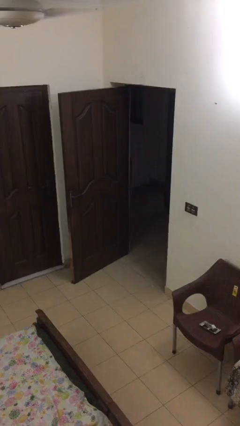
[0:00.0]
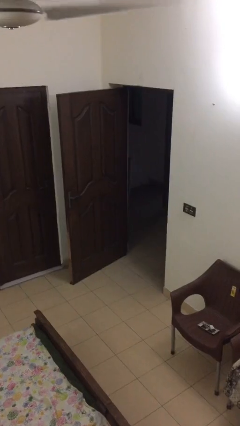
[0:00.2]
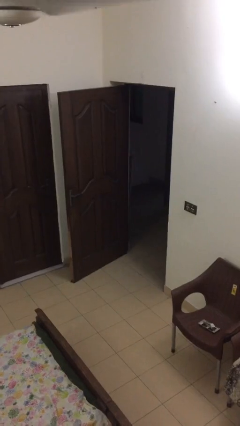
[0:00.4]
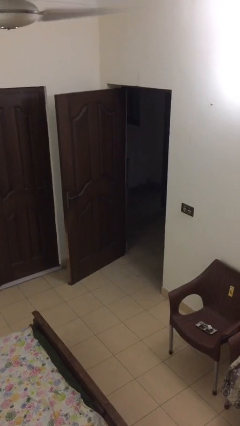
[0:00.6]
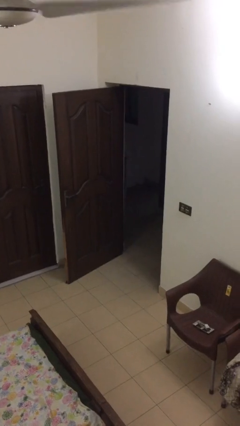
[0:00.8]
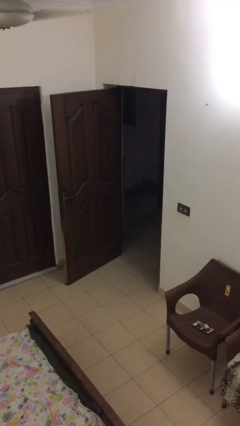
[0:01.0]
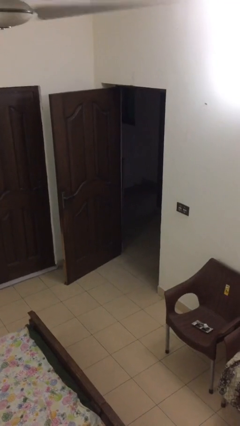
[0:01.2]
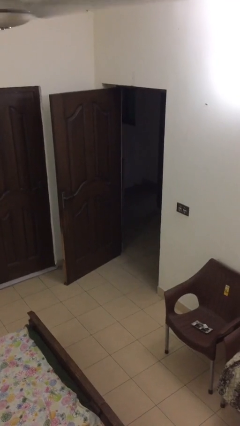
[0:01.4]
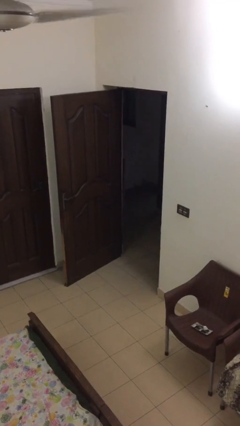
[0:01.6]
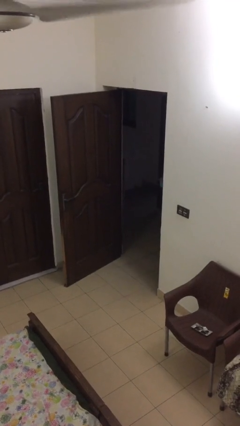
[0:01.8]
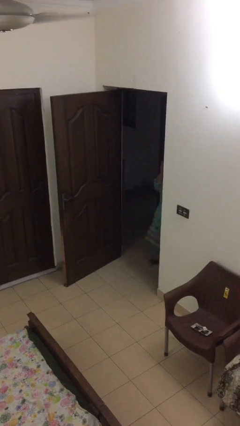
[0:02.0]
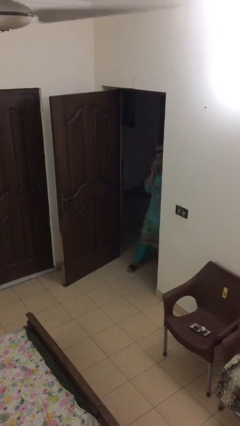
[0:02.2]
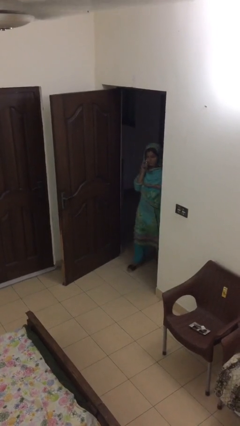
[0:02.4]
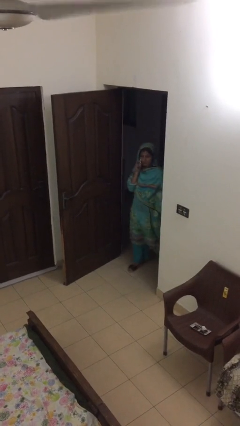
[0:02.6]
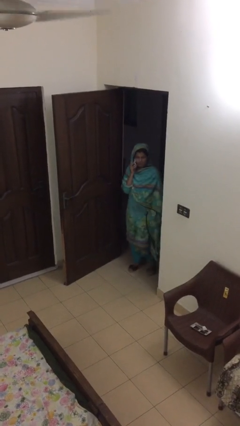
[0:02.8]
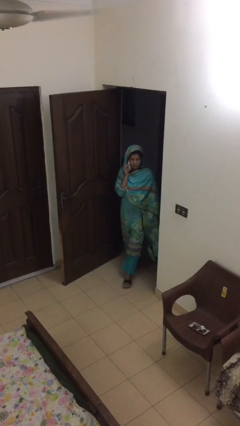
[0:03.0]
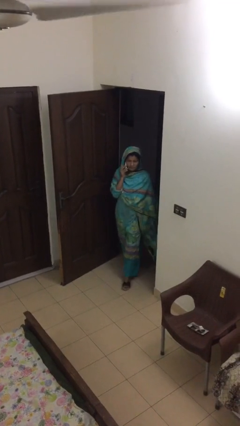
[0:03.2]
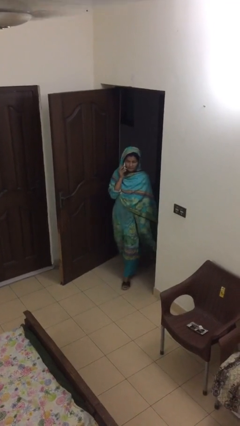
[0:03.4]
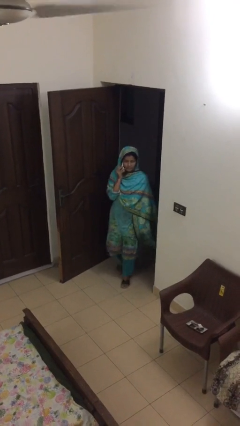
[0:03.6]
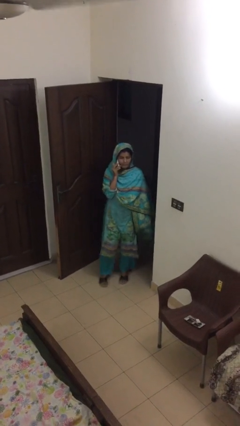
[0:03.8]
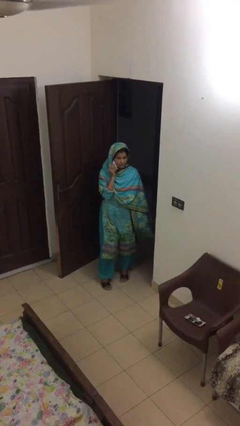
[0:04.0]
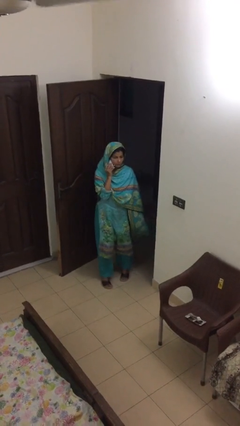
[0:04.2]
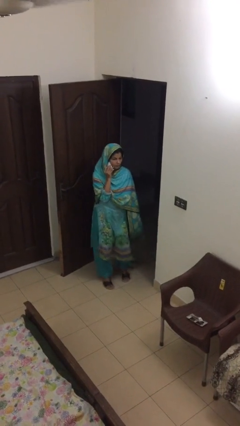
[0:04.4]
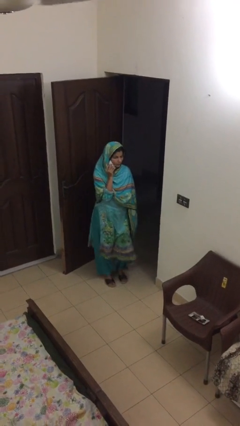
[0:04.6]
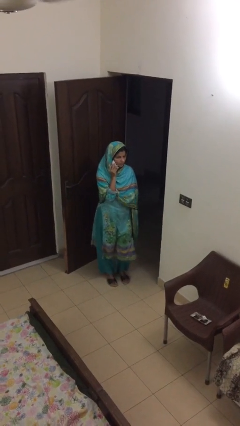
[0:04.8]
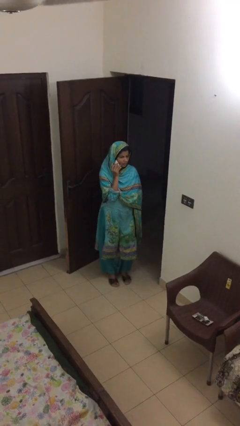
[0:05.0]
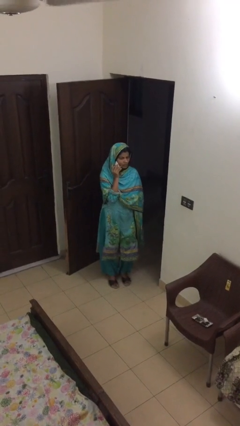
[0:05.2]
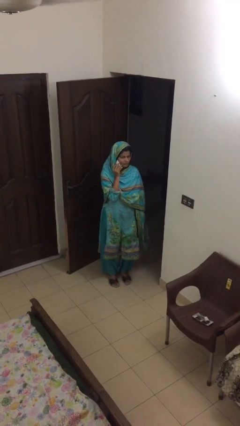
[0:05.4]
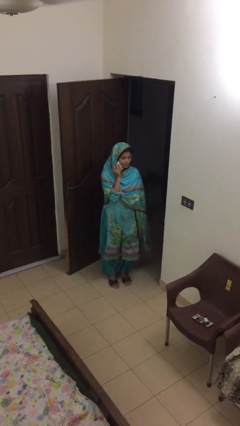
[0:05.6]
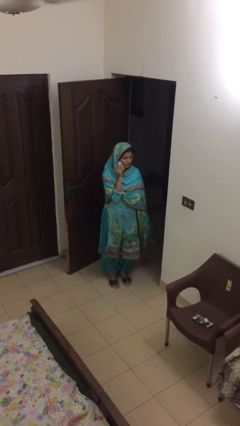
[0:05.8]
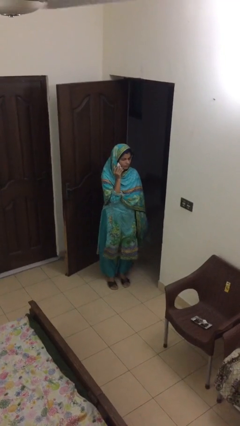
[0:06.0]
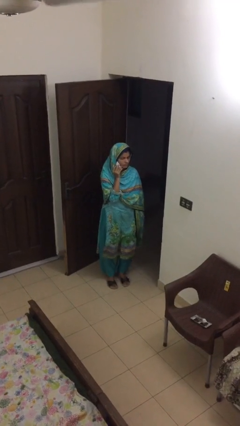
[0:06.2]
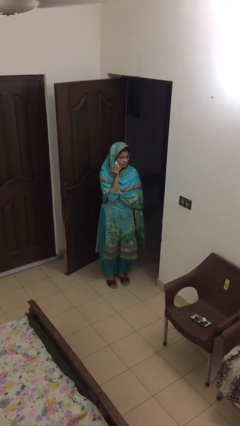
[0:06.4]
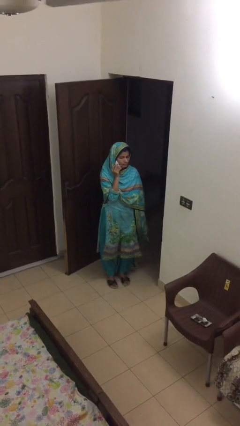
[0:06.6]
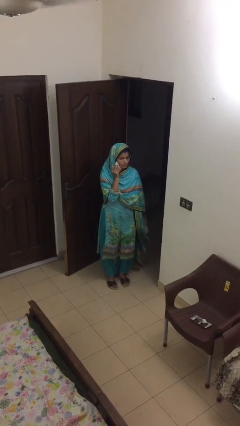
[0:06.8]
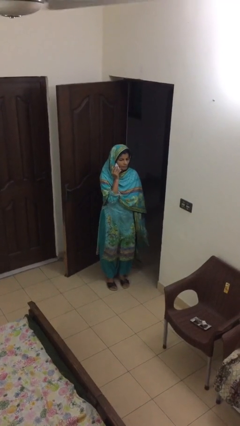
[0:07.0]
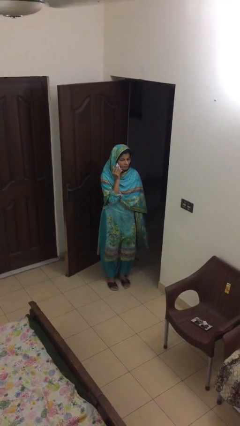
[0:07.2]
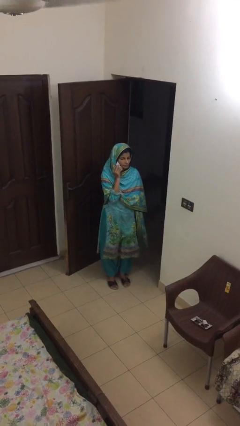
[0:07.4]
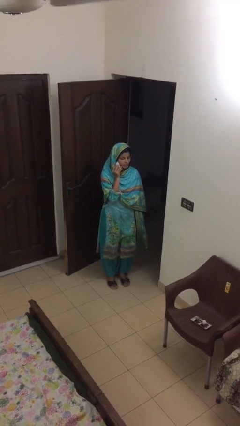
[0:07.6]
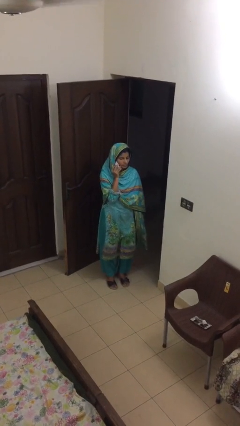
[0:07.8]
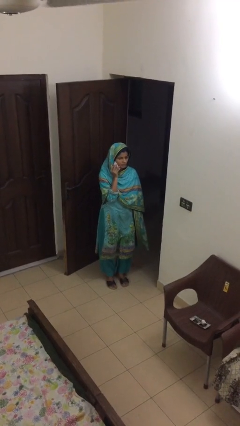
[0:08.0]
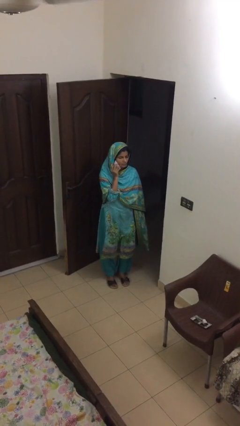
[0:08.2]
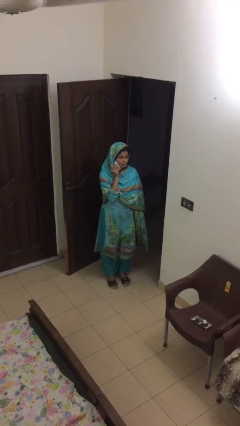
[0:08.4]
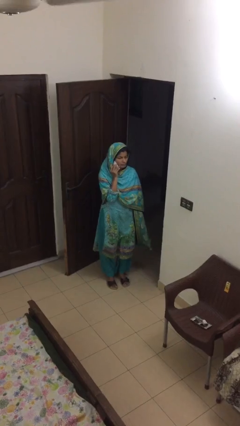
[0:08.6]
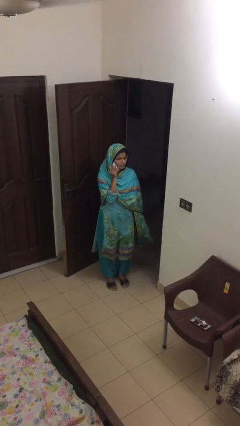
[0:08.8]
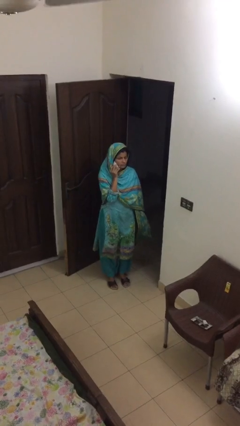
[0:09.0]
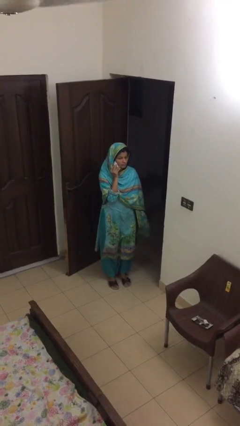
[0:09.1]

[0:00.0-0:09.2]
person enters scene through structure

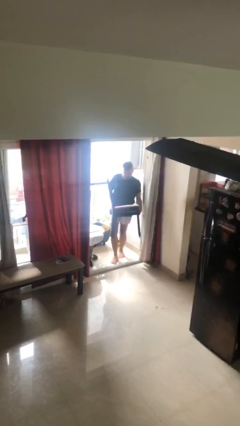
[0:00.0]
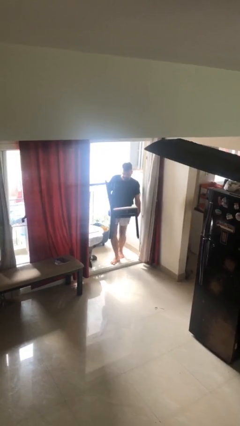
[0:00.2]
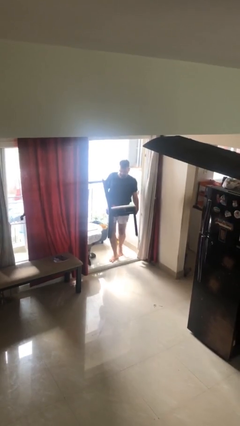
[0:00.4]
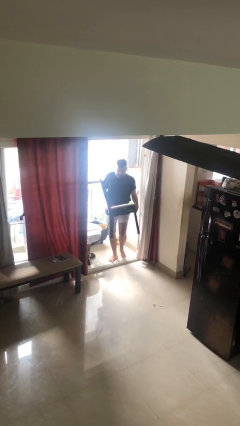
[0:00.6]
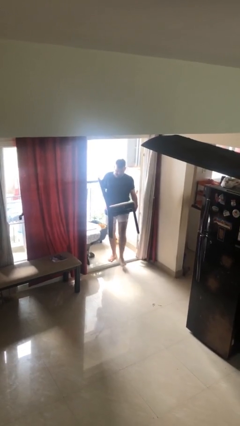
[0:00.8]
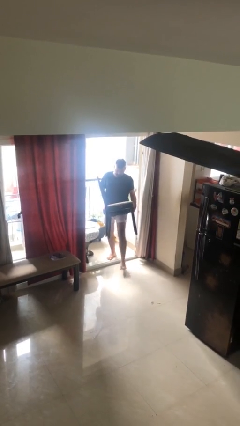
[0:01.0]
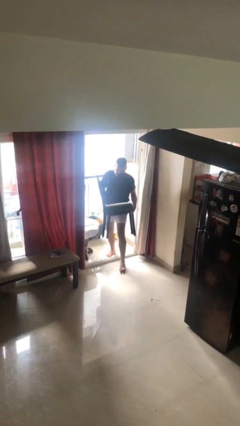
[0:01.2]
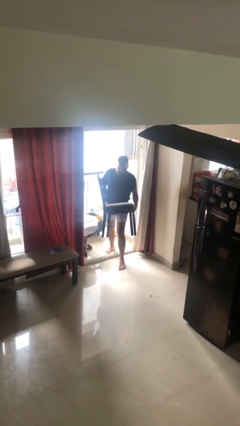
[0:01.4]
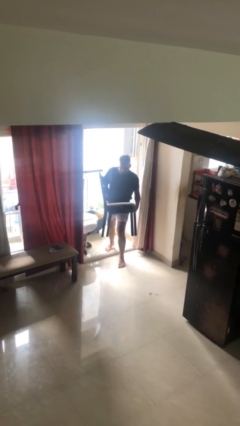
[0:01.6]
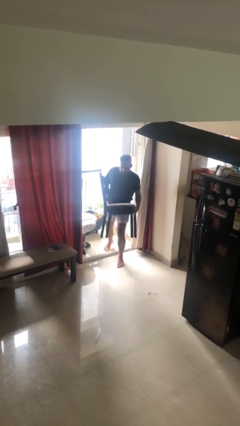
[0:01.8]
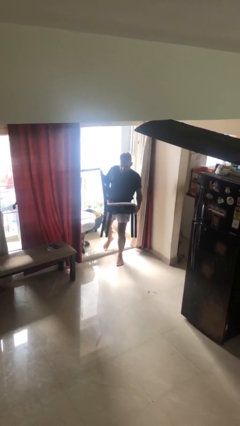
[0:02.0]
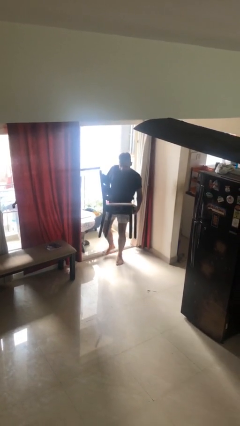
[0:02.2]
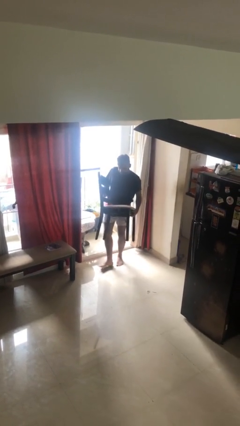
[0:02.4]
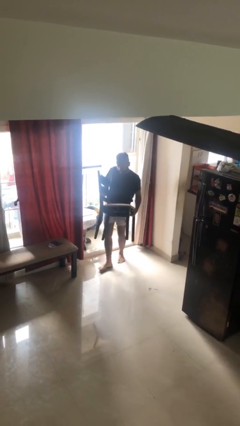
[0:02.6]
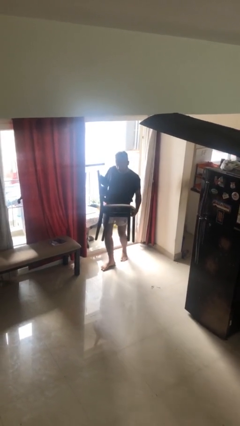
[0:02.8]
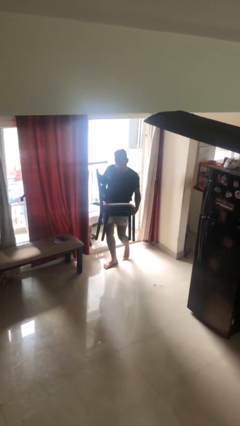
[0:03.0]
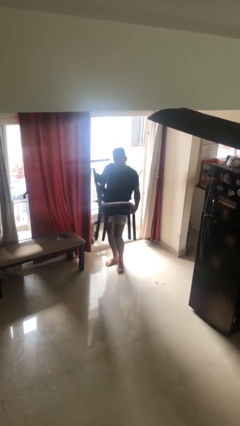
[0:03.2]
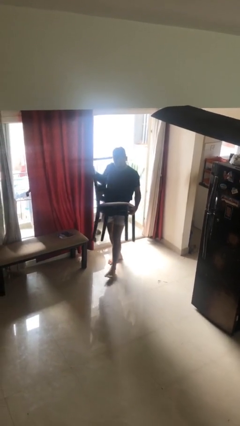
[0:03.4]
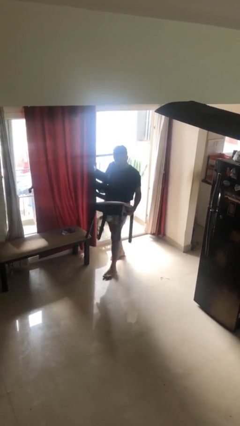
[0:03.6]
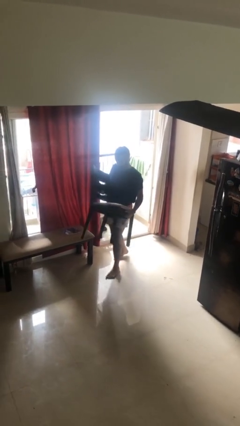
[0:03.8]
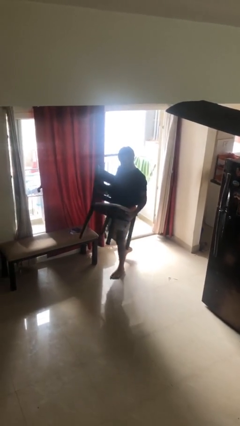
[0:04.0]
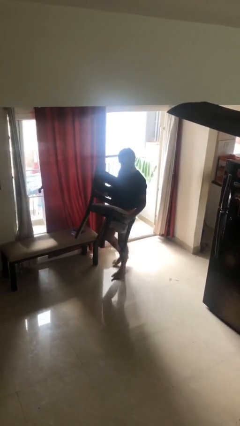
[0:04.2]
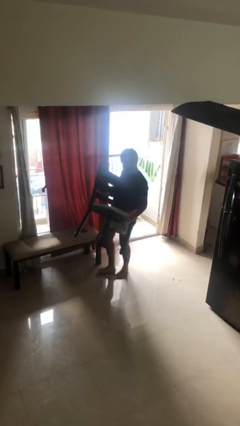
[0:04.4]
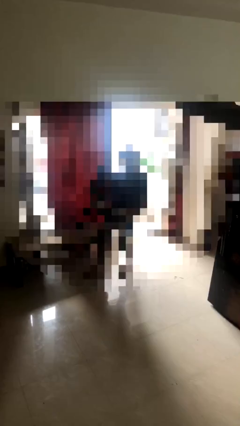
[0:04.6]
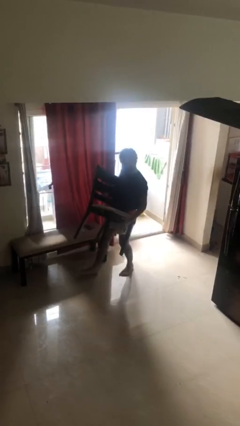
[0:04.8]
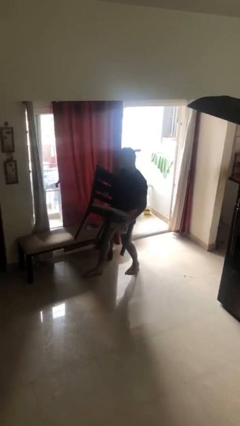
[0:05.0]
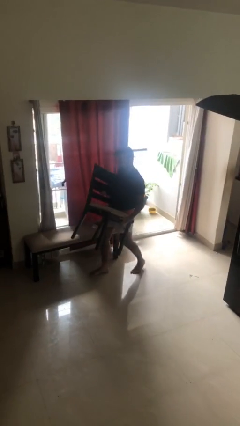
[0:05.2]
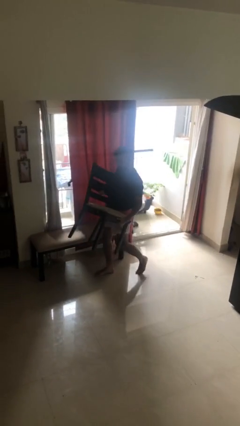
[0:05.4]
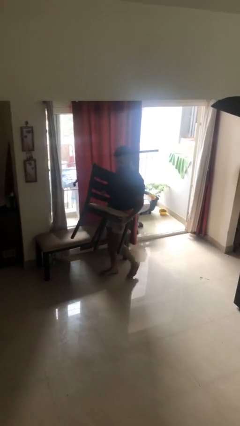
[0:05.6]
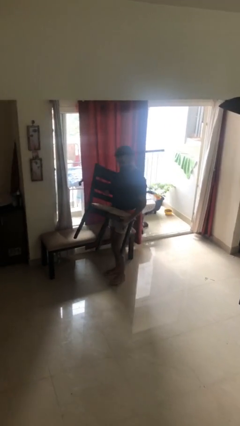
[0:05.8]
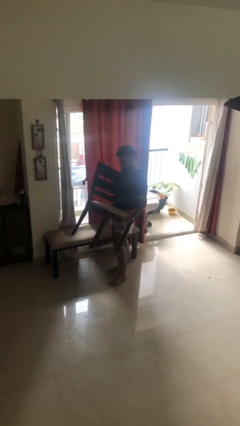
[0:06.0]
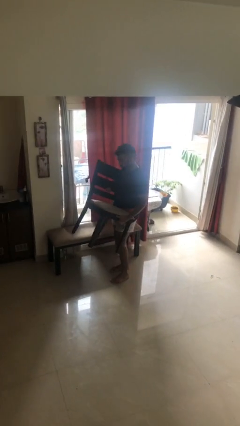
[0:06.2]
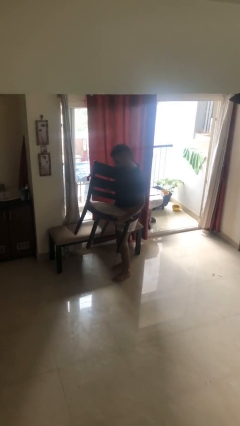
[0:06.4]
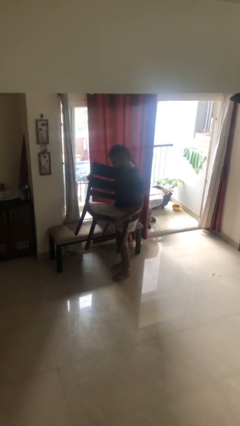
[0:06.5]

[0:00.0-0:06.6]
person carries heavy object

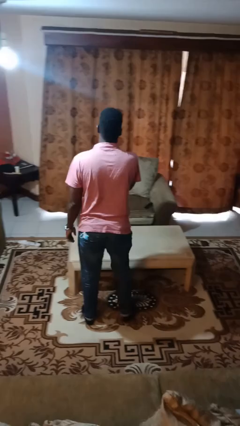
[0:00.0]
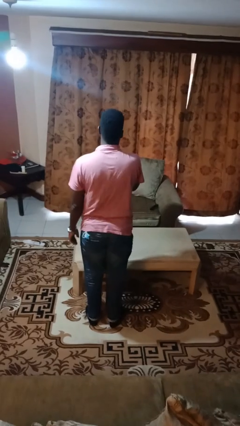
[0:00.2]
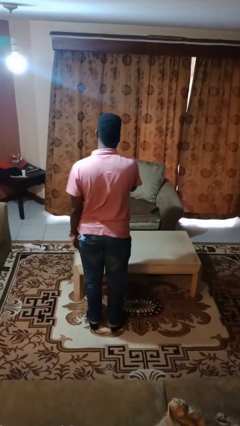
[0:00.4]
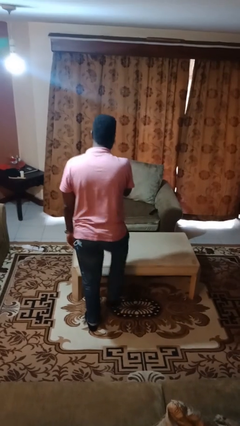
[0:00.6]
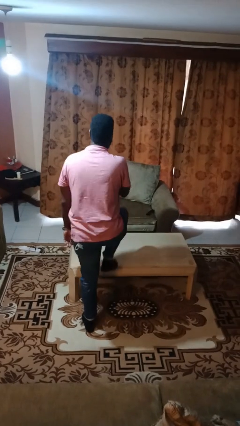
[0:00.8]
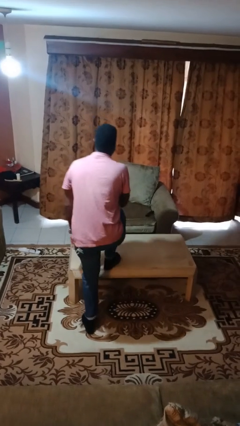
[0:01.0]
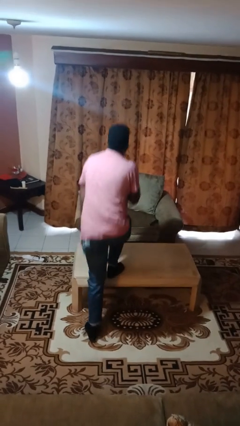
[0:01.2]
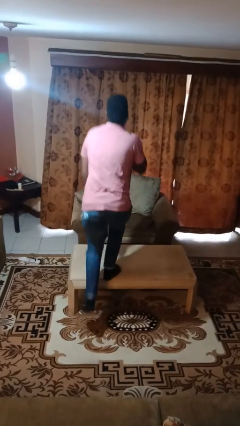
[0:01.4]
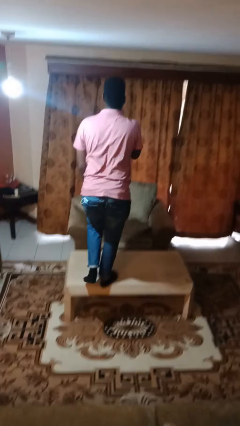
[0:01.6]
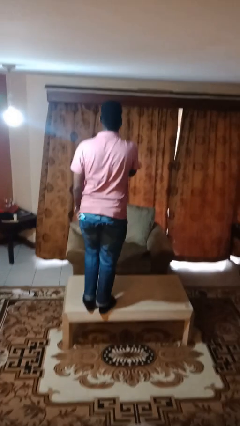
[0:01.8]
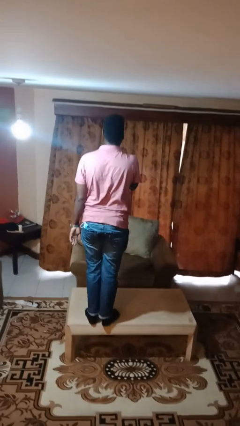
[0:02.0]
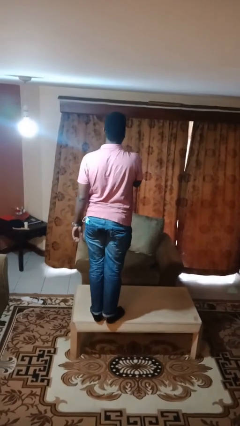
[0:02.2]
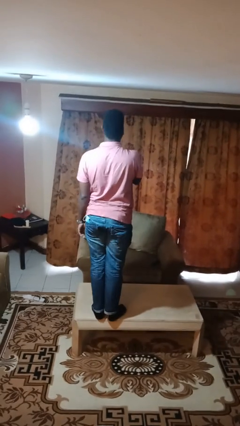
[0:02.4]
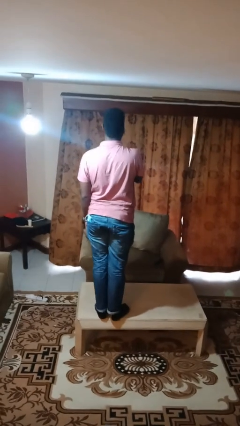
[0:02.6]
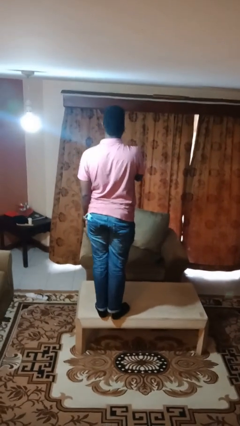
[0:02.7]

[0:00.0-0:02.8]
person climbs on table
